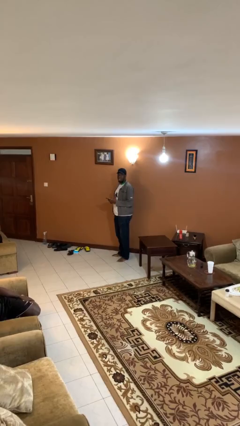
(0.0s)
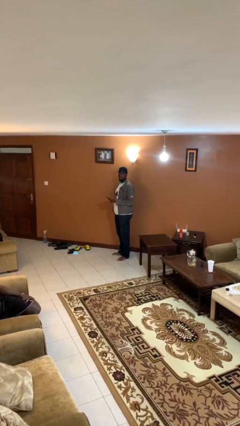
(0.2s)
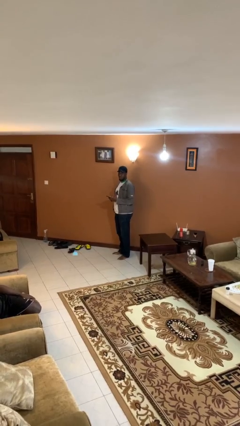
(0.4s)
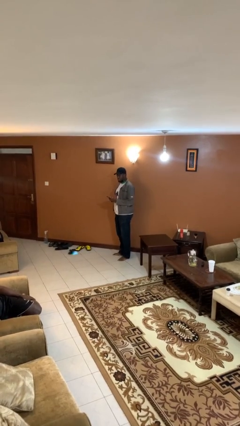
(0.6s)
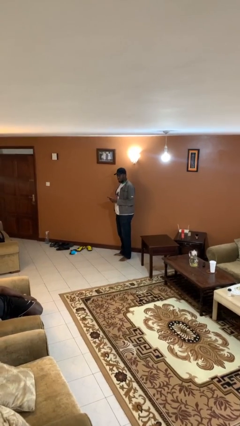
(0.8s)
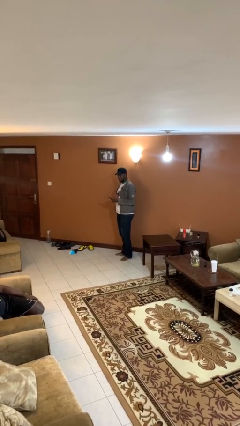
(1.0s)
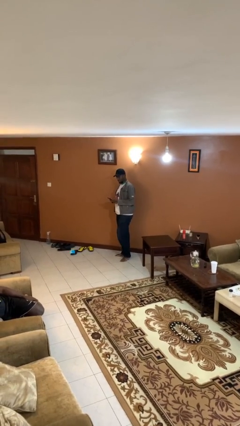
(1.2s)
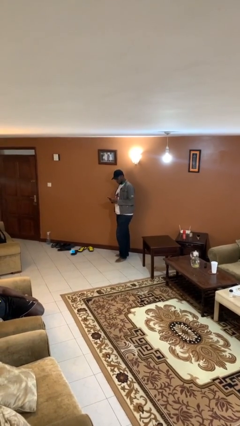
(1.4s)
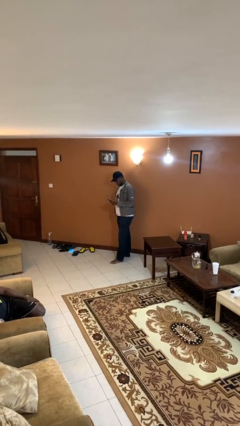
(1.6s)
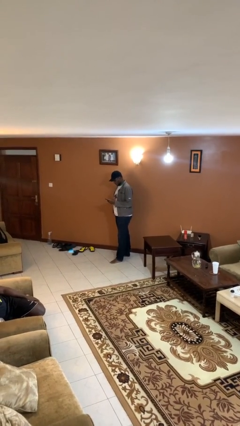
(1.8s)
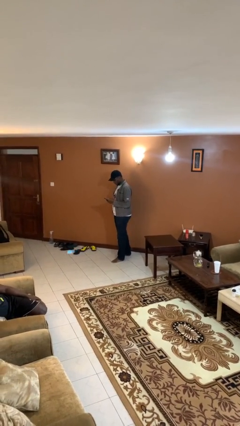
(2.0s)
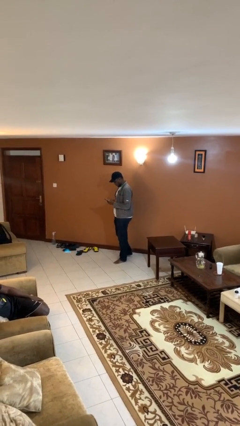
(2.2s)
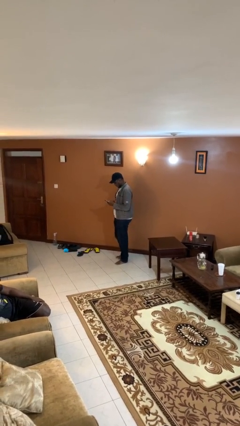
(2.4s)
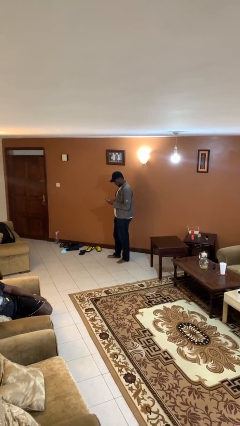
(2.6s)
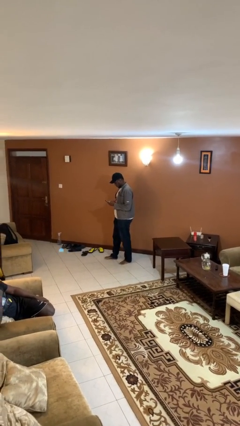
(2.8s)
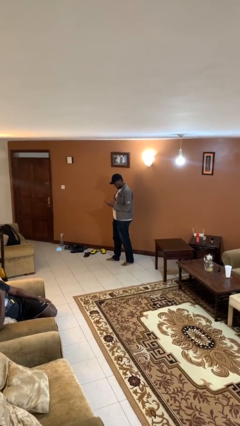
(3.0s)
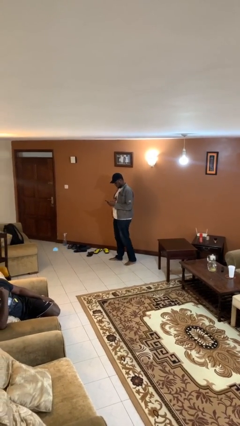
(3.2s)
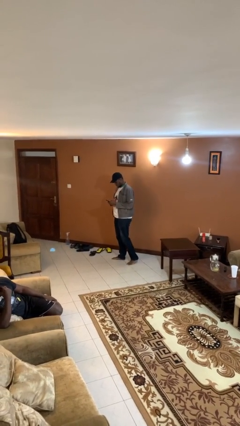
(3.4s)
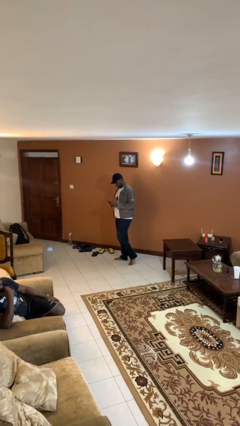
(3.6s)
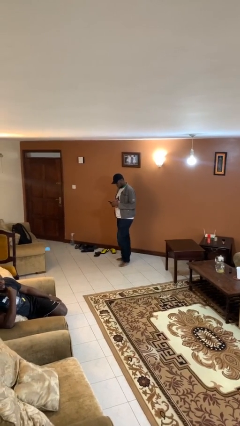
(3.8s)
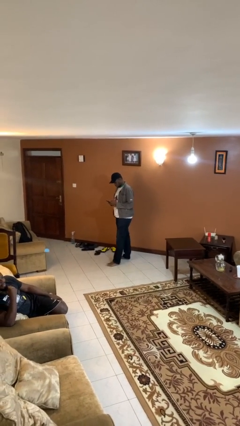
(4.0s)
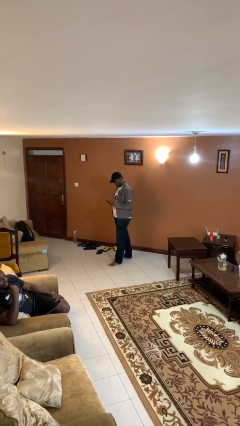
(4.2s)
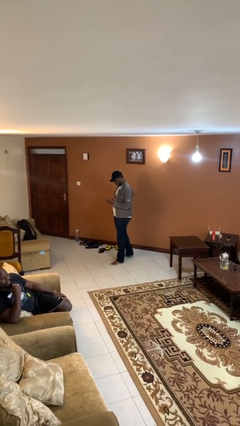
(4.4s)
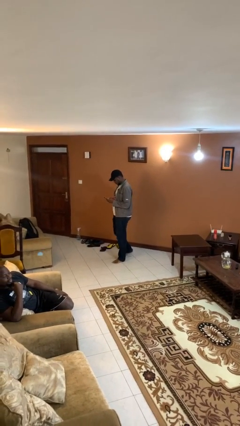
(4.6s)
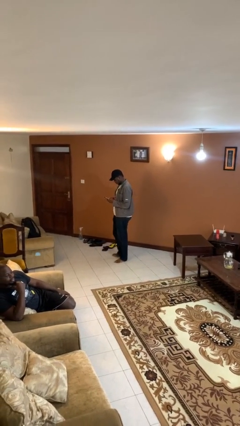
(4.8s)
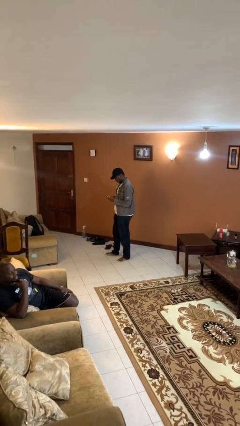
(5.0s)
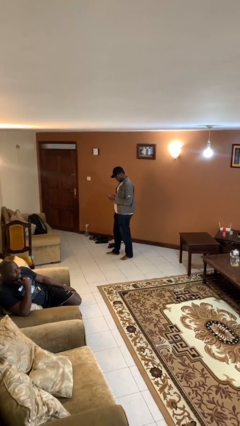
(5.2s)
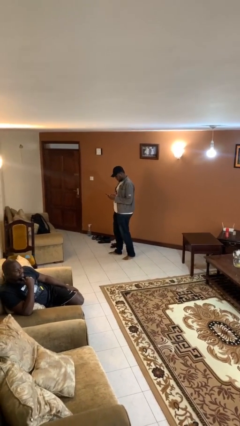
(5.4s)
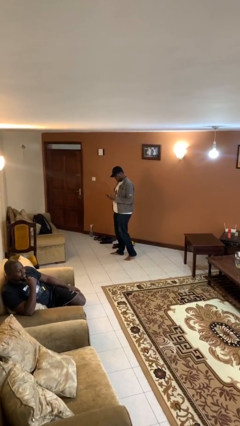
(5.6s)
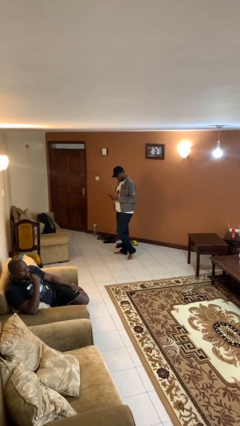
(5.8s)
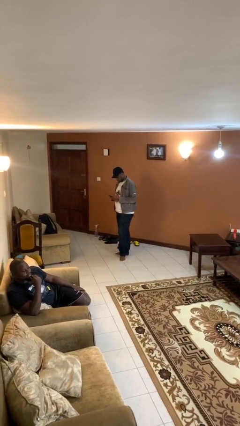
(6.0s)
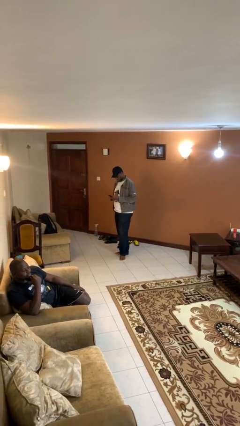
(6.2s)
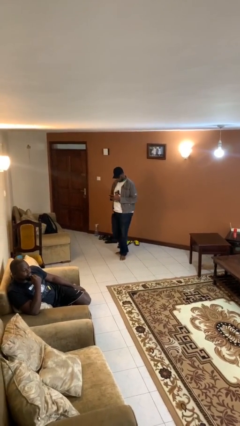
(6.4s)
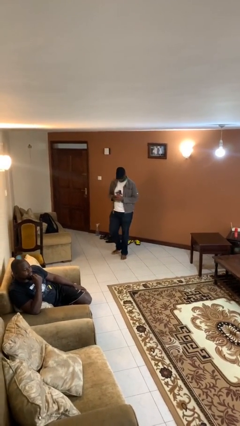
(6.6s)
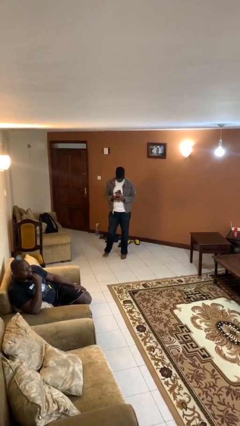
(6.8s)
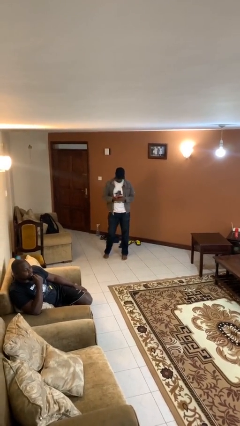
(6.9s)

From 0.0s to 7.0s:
person texts on phone

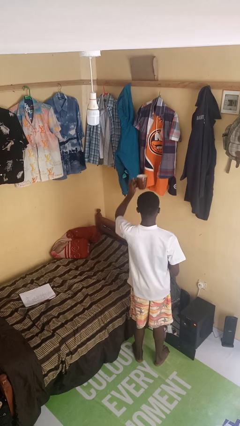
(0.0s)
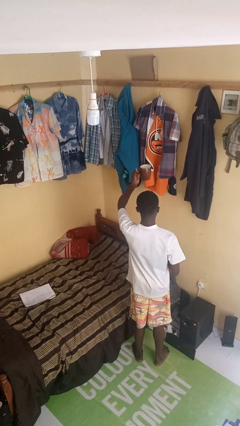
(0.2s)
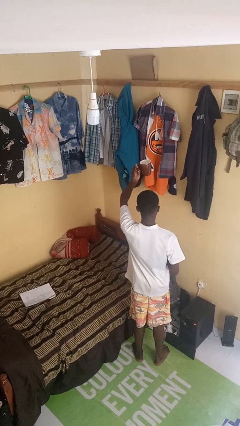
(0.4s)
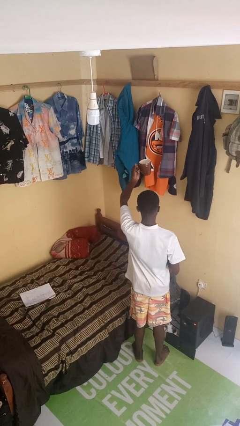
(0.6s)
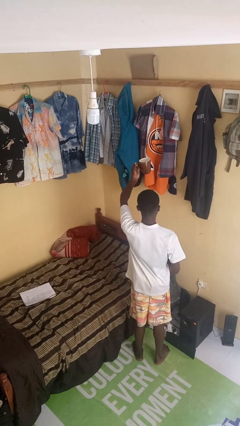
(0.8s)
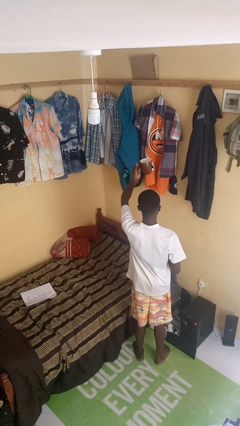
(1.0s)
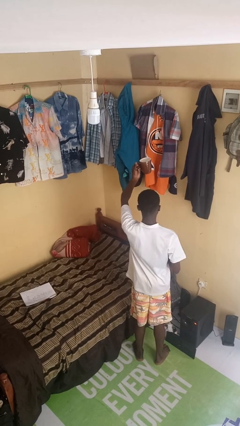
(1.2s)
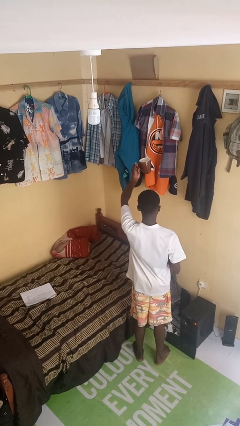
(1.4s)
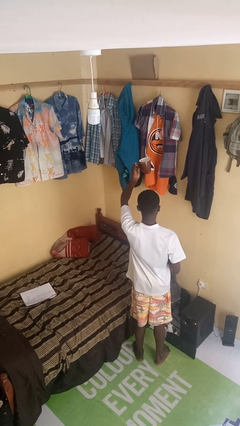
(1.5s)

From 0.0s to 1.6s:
person holds object above head

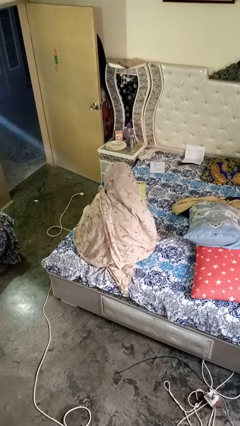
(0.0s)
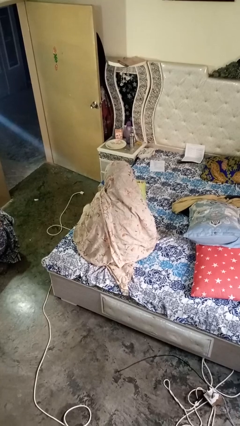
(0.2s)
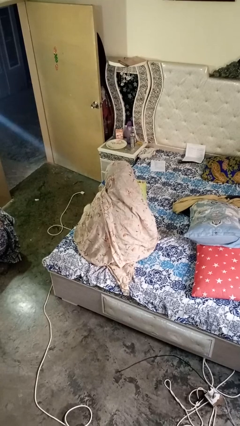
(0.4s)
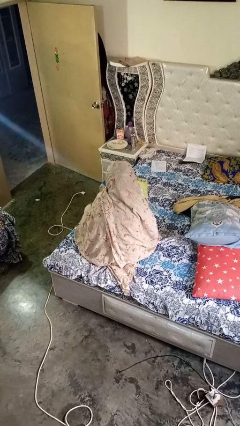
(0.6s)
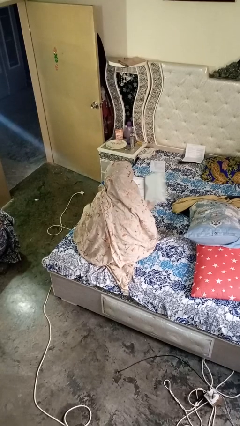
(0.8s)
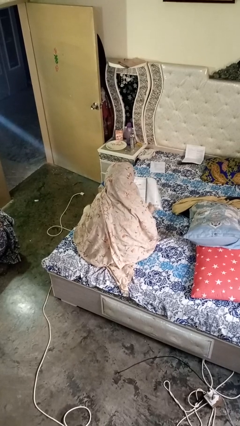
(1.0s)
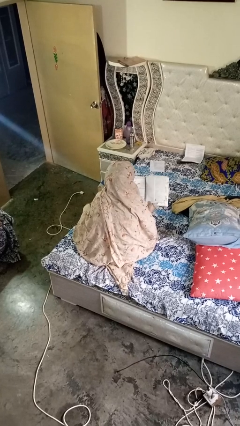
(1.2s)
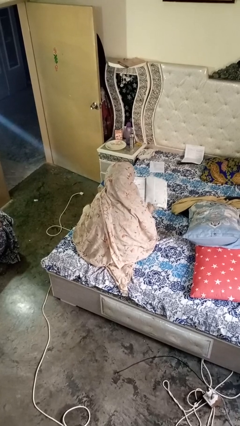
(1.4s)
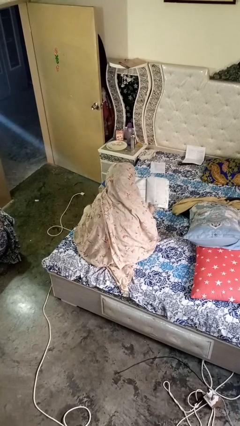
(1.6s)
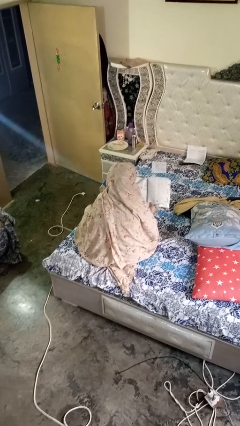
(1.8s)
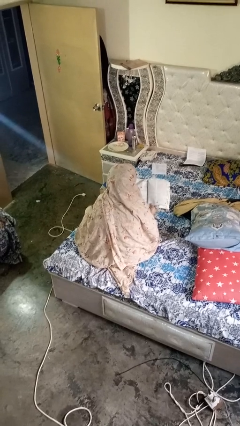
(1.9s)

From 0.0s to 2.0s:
person reads magazine

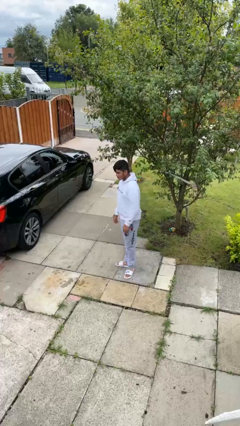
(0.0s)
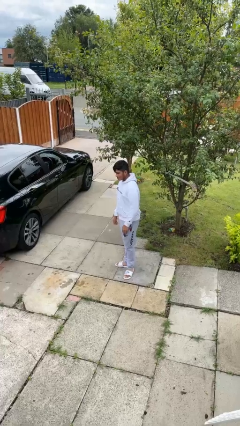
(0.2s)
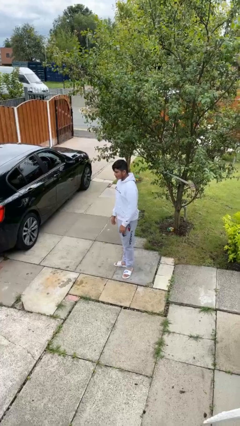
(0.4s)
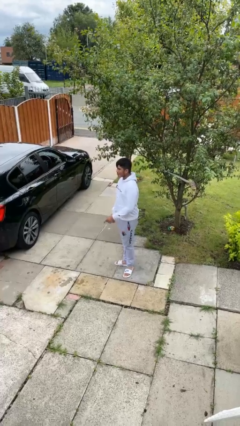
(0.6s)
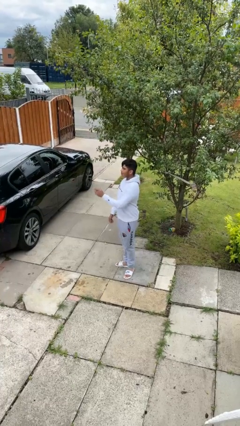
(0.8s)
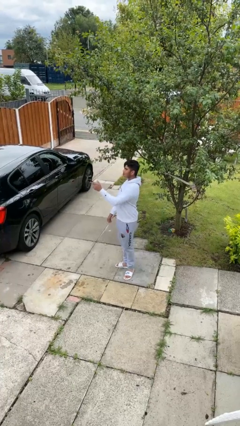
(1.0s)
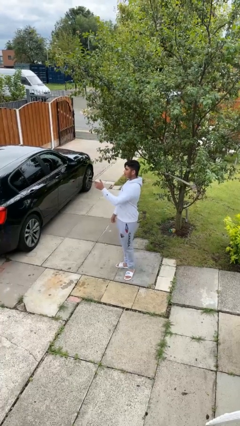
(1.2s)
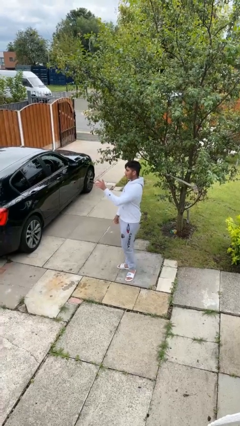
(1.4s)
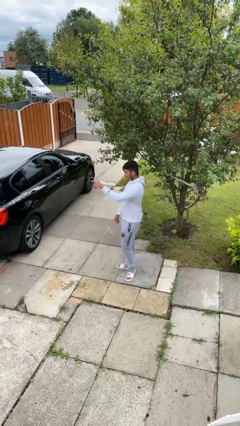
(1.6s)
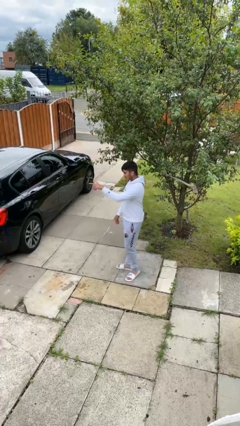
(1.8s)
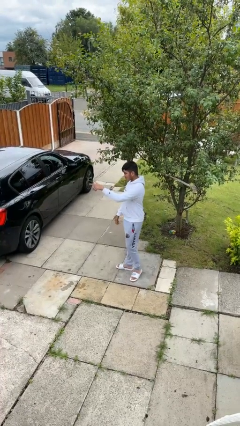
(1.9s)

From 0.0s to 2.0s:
person points at person

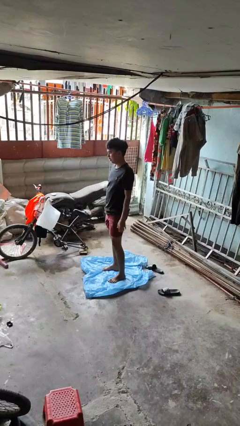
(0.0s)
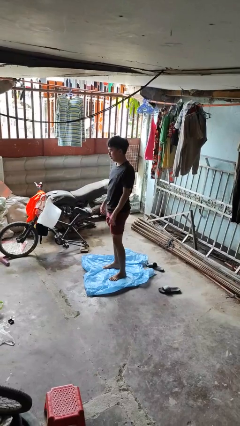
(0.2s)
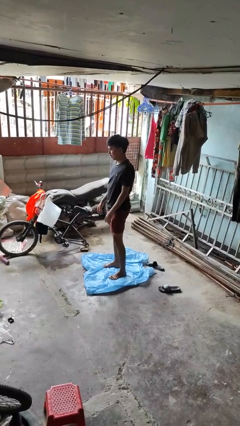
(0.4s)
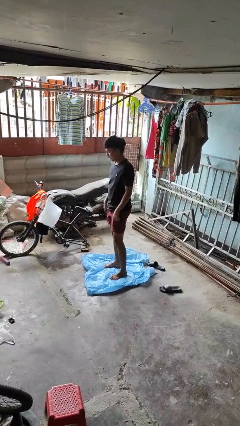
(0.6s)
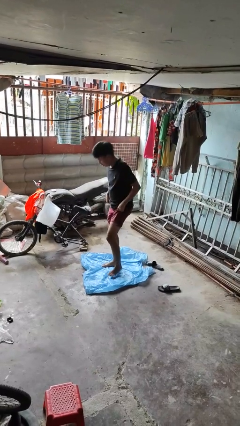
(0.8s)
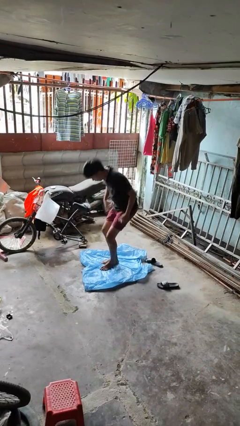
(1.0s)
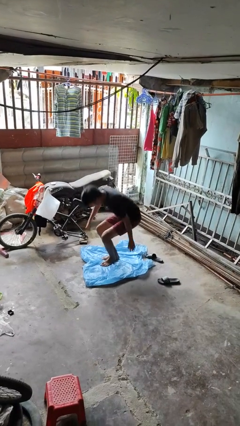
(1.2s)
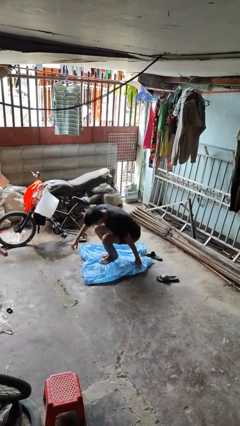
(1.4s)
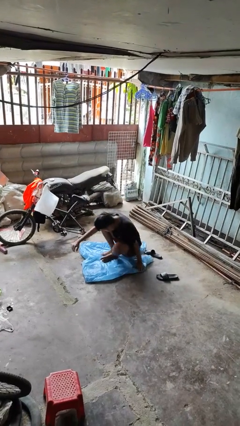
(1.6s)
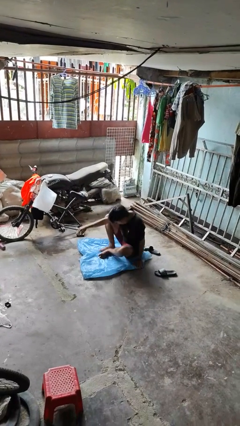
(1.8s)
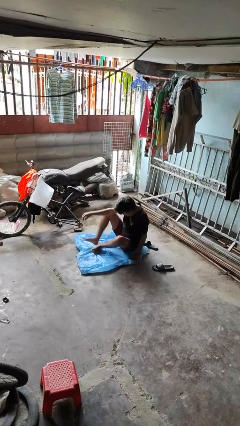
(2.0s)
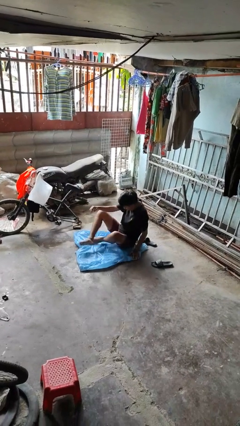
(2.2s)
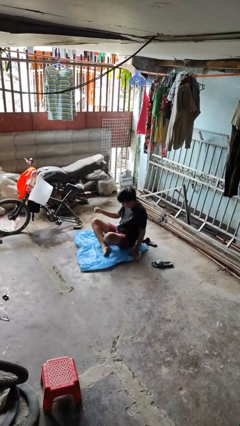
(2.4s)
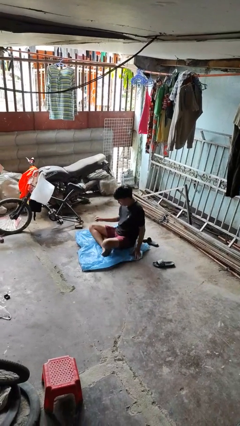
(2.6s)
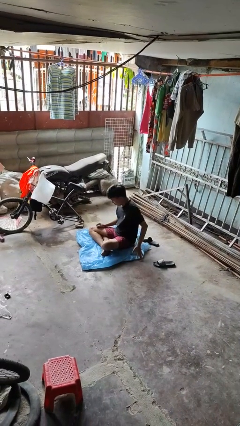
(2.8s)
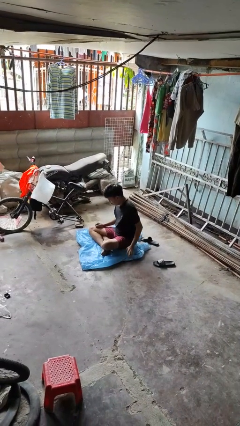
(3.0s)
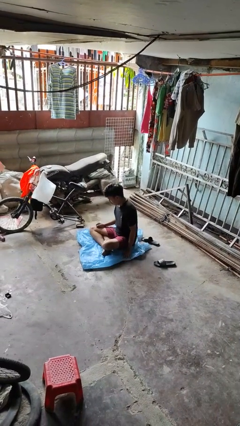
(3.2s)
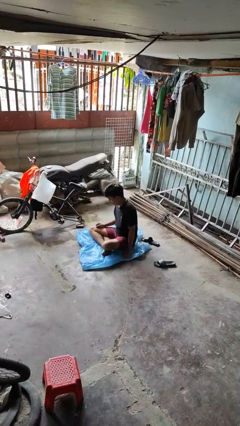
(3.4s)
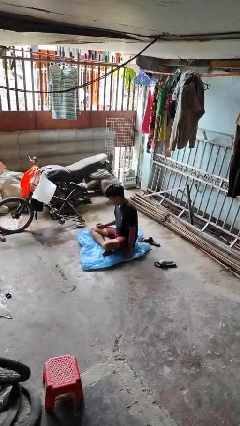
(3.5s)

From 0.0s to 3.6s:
person sits crisscross

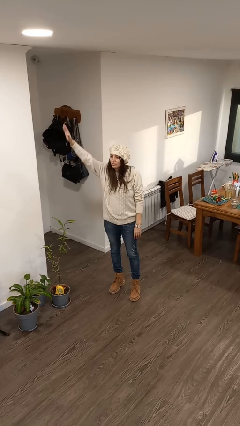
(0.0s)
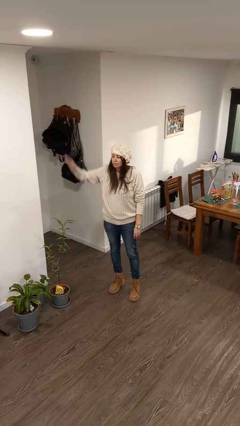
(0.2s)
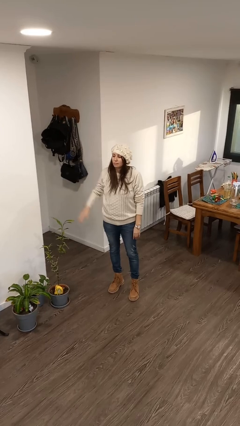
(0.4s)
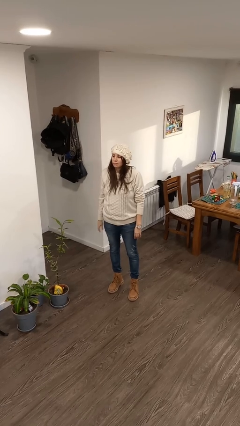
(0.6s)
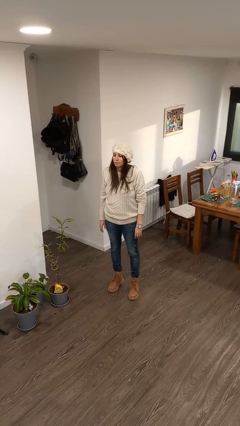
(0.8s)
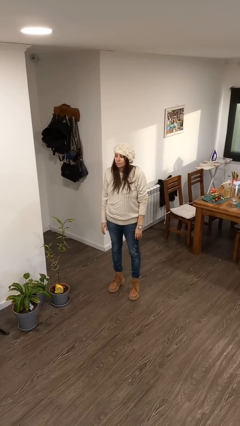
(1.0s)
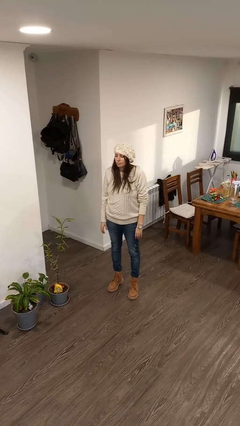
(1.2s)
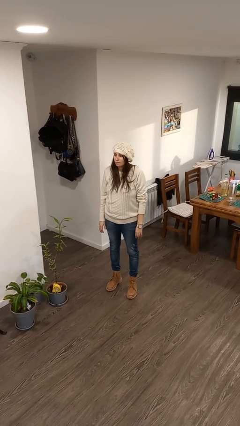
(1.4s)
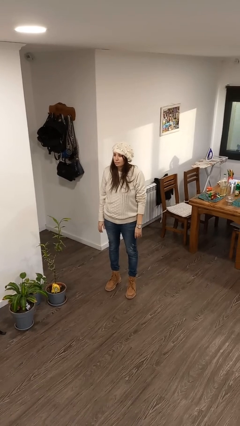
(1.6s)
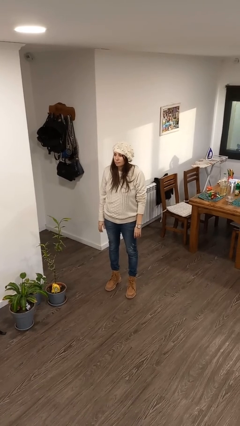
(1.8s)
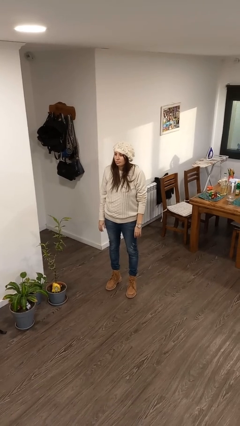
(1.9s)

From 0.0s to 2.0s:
person gestures lower hand
